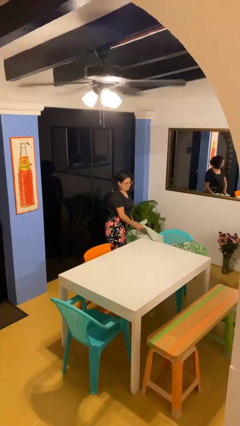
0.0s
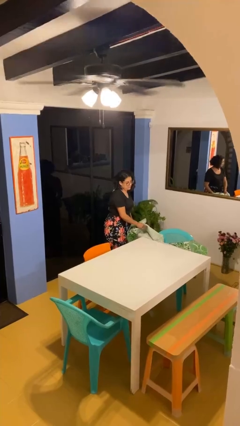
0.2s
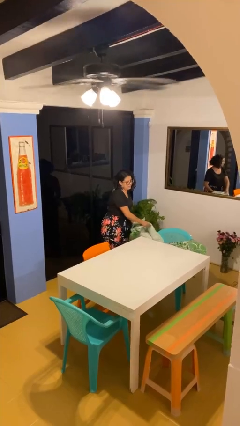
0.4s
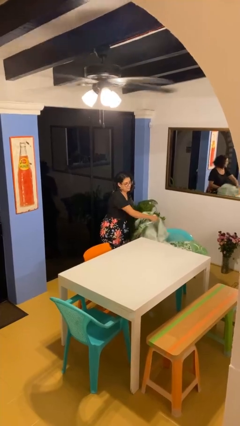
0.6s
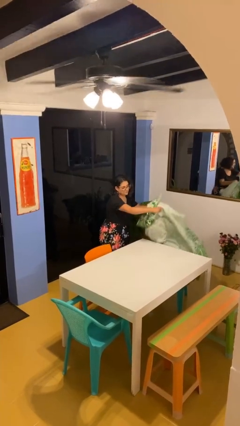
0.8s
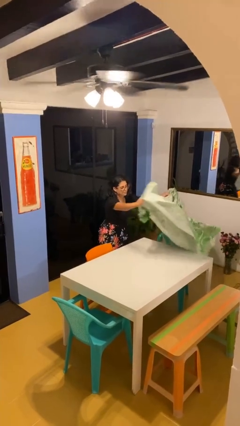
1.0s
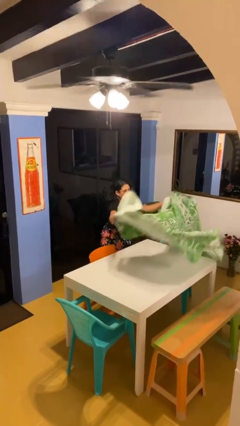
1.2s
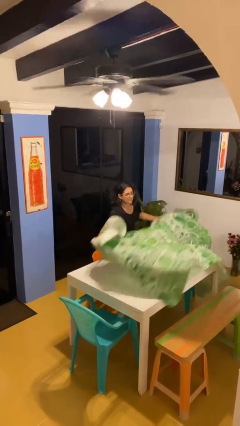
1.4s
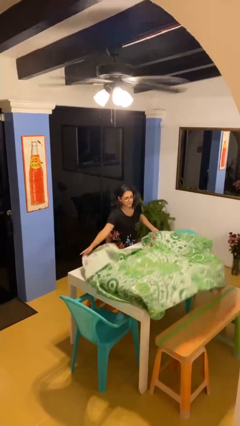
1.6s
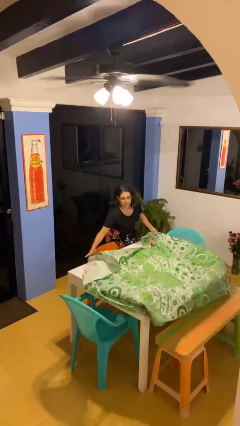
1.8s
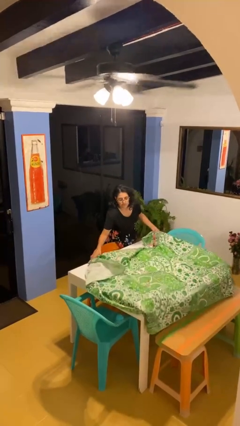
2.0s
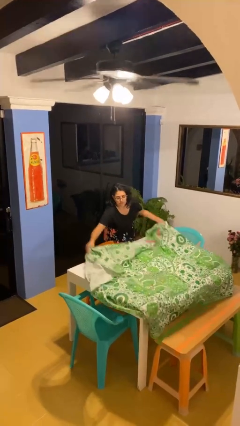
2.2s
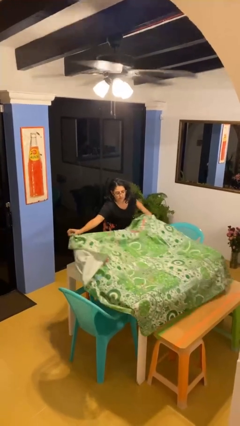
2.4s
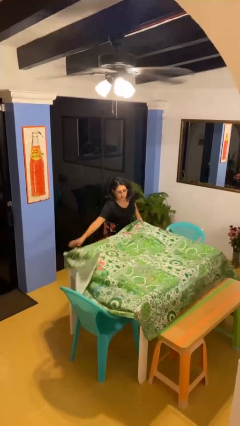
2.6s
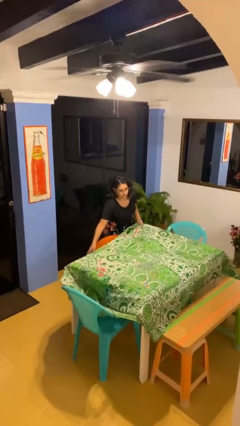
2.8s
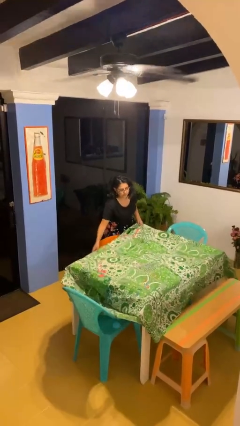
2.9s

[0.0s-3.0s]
person spreads tablecloth

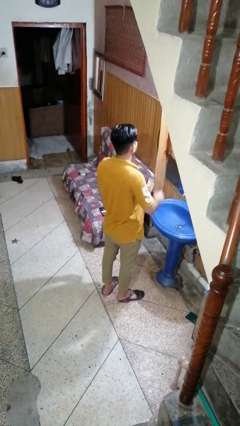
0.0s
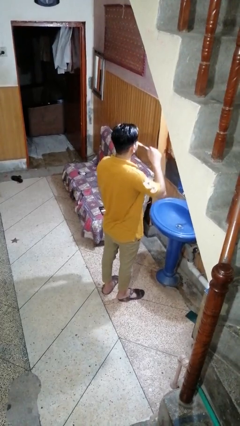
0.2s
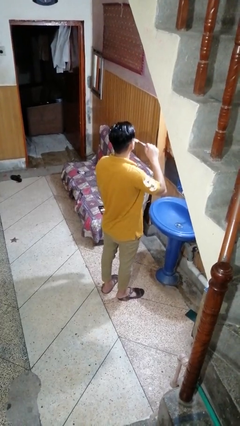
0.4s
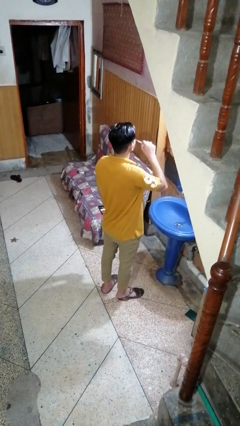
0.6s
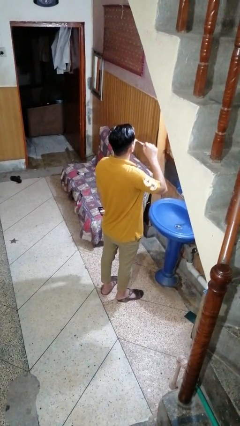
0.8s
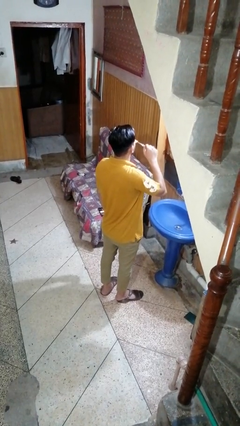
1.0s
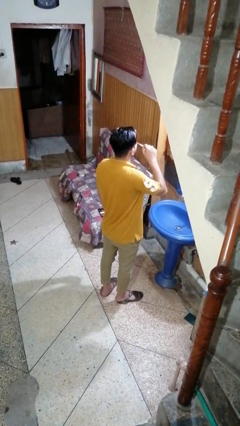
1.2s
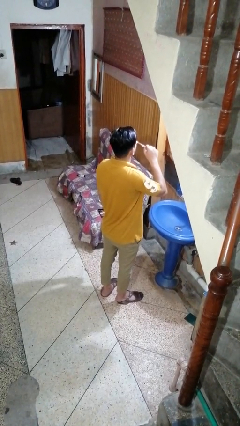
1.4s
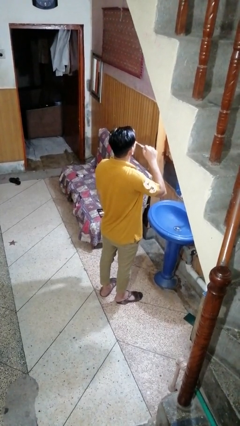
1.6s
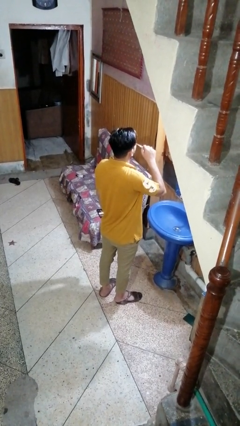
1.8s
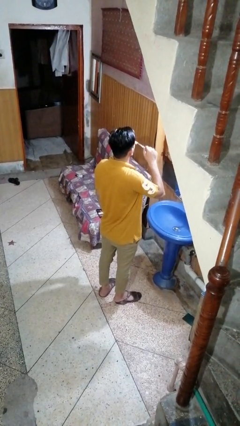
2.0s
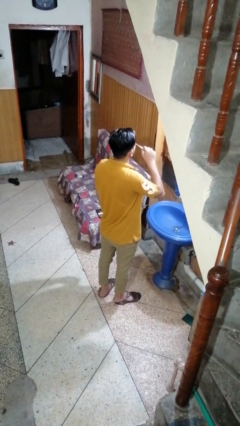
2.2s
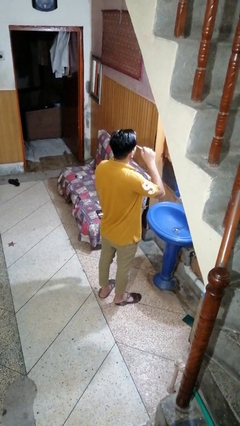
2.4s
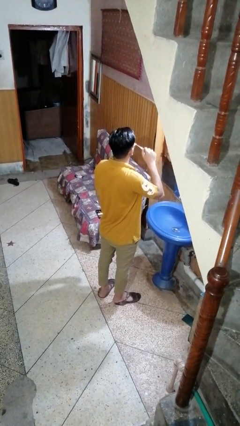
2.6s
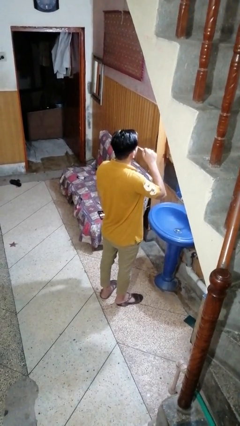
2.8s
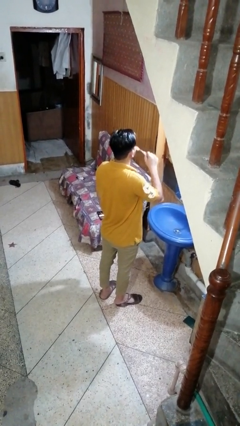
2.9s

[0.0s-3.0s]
person brushes teeth

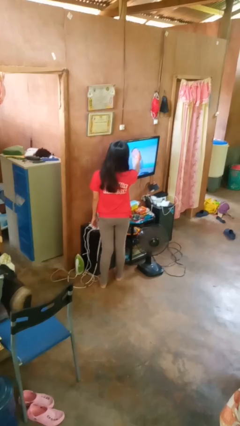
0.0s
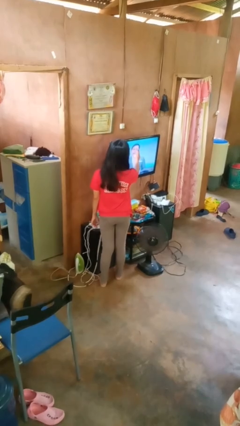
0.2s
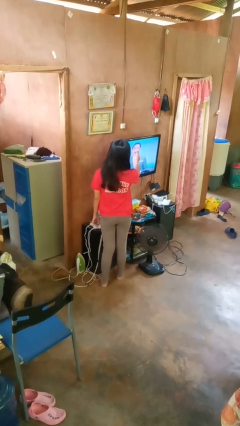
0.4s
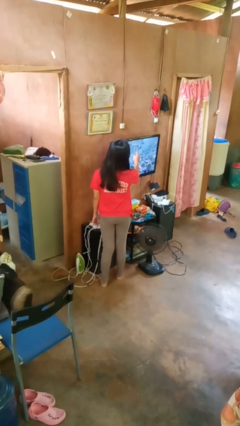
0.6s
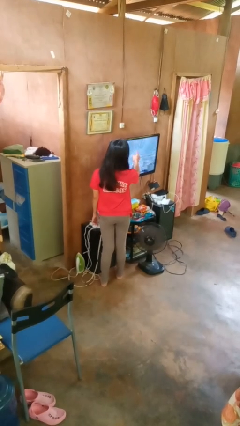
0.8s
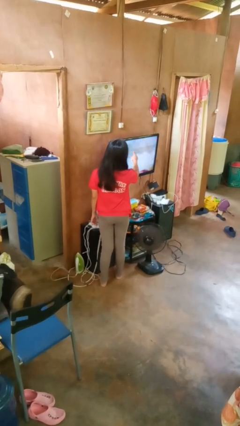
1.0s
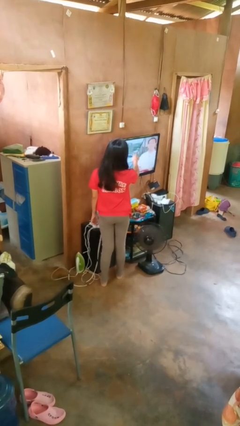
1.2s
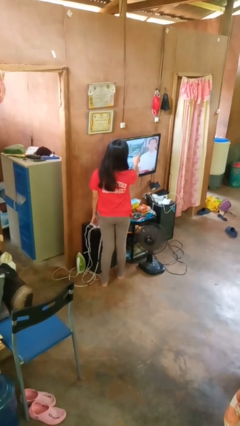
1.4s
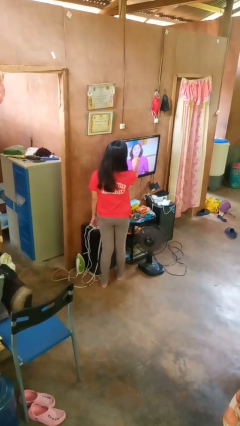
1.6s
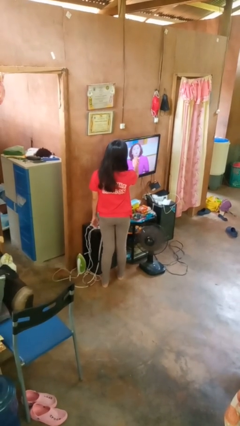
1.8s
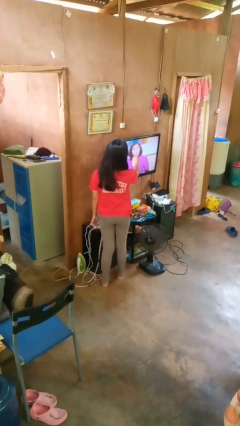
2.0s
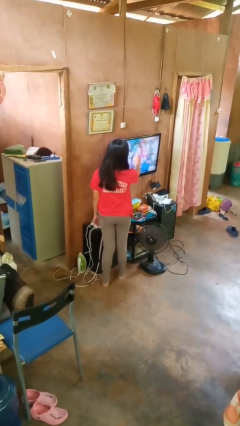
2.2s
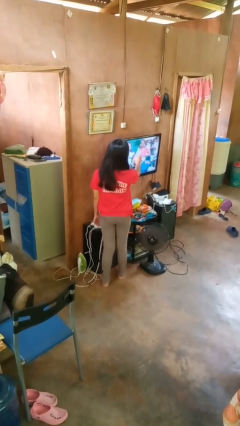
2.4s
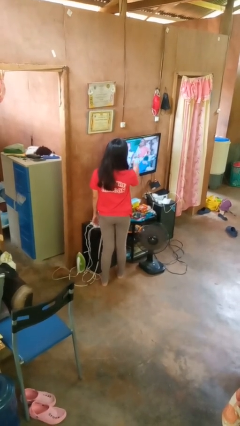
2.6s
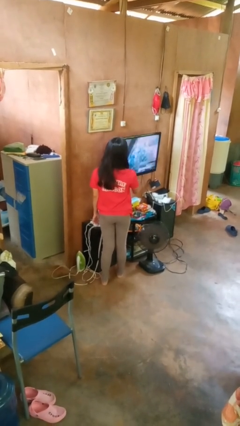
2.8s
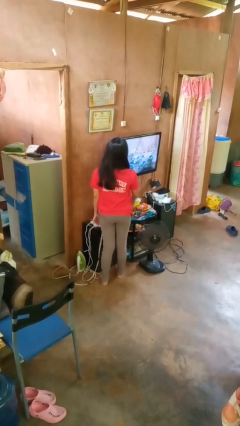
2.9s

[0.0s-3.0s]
person taps object with finger

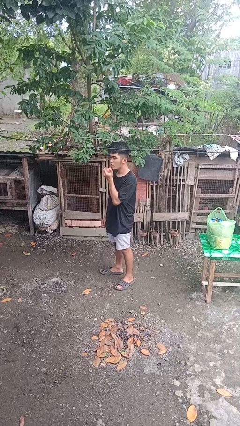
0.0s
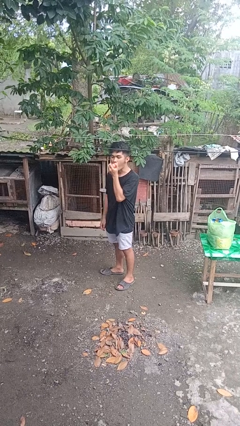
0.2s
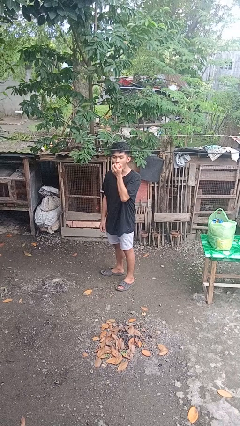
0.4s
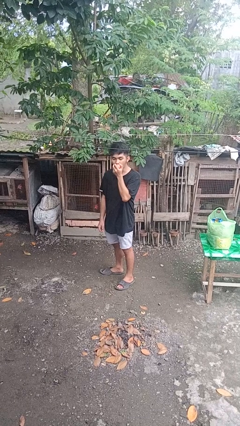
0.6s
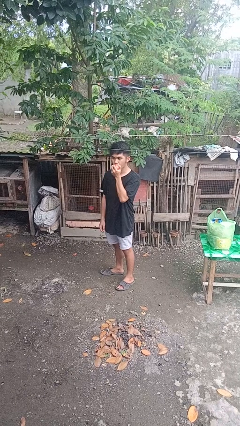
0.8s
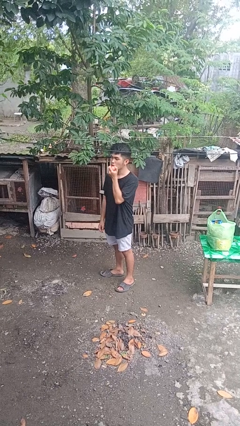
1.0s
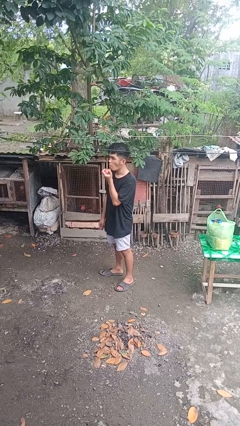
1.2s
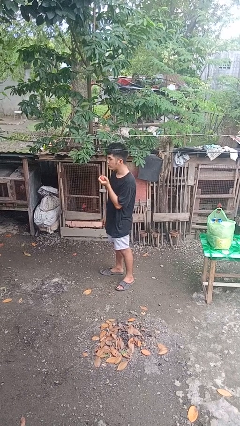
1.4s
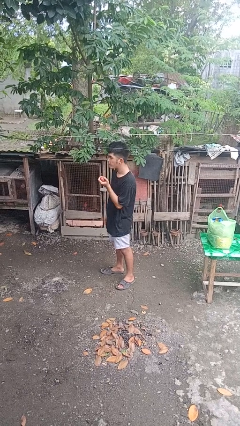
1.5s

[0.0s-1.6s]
person eats apple

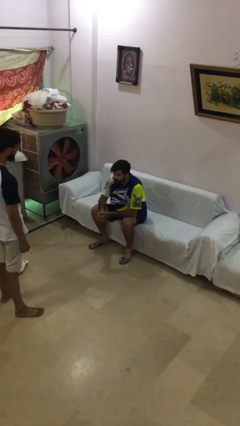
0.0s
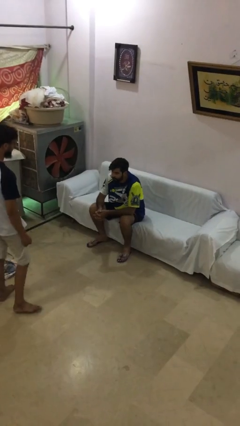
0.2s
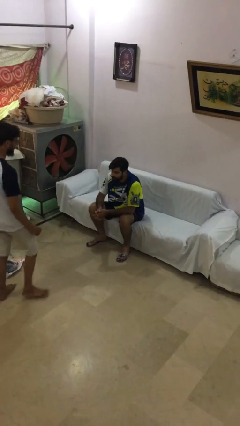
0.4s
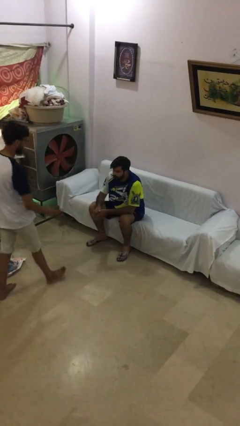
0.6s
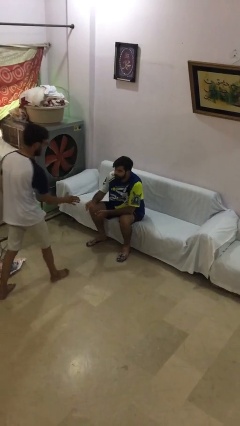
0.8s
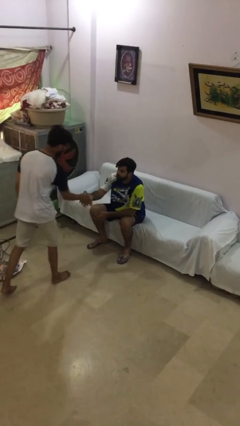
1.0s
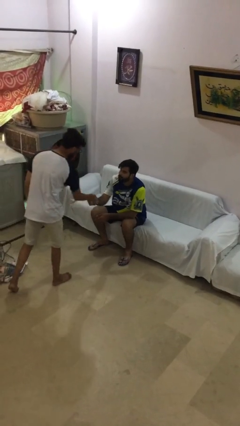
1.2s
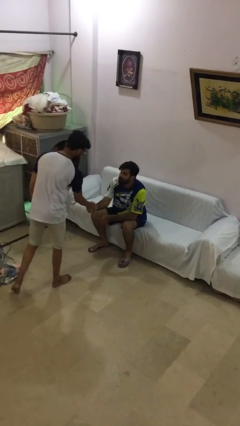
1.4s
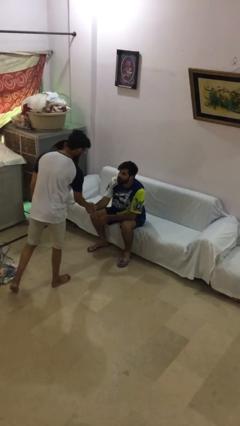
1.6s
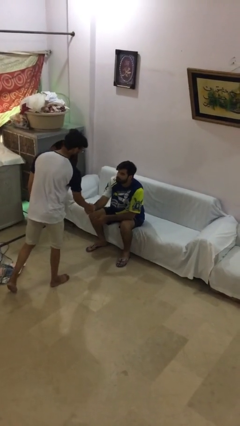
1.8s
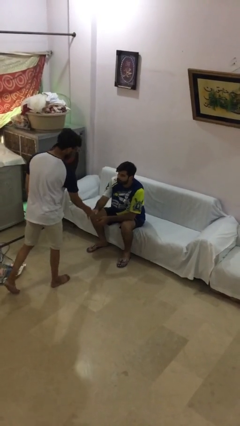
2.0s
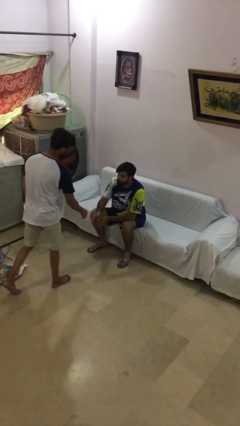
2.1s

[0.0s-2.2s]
person shakes hand

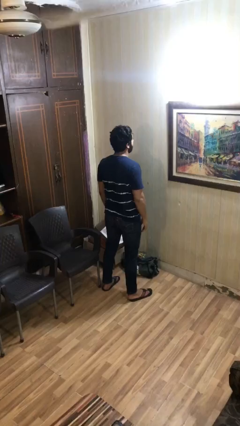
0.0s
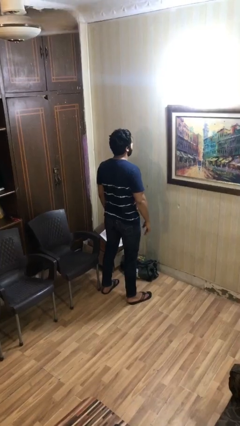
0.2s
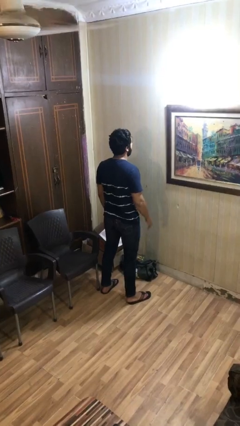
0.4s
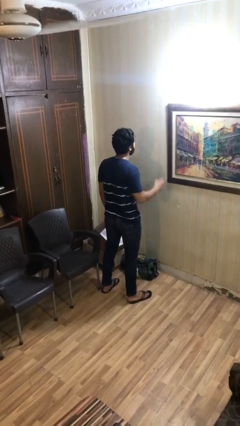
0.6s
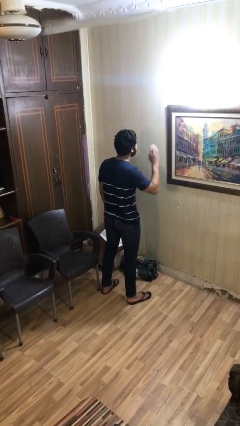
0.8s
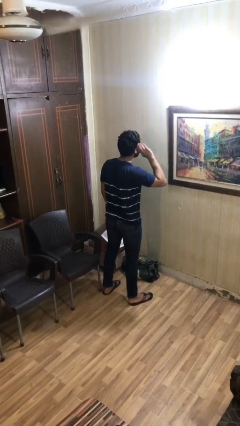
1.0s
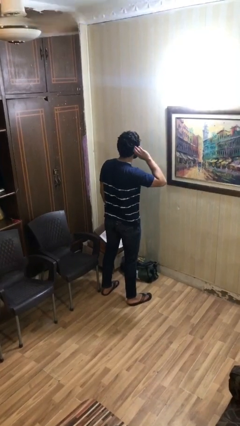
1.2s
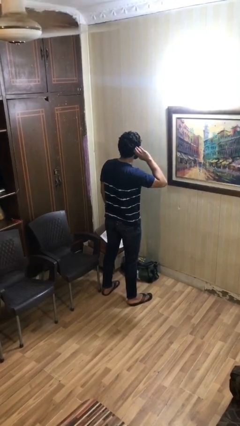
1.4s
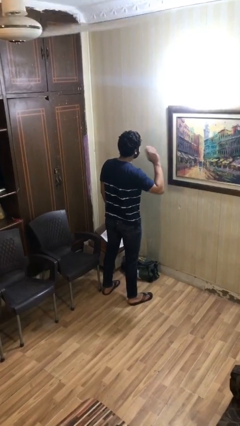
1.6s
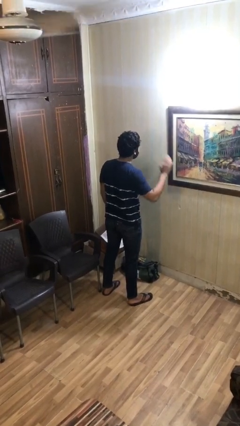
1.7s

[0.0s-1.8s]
person gestures listen closely

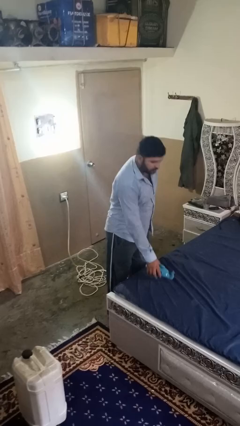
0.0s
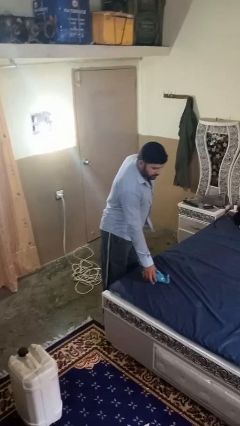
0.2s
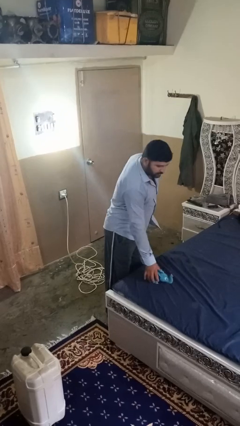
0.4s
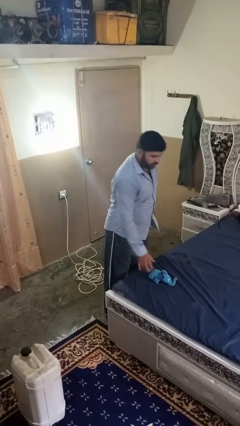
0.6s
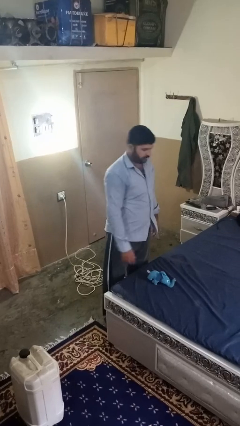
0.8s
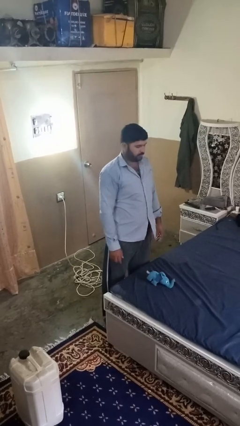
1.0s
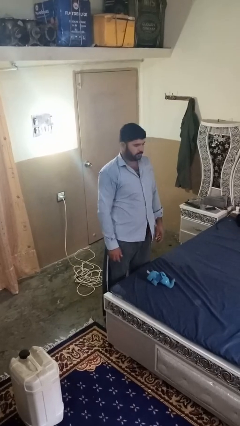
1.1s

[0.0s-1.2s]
person hugs stuffed animal

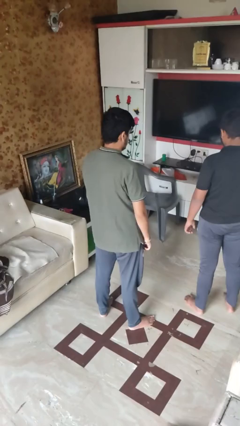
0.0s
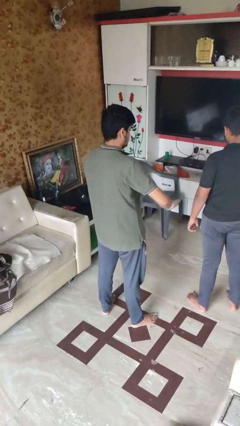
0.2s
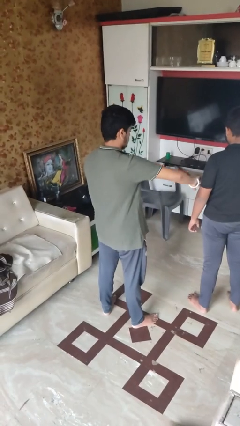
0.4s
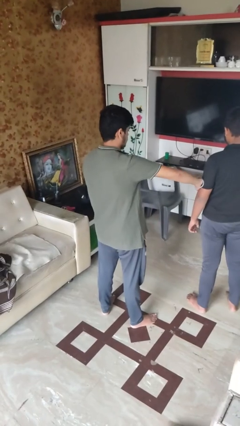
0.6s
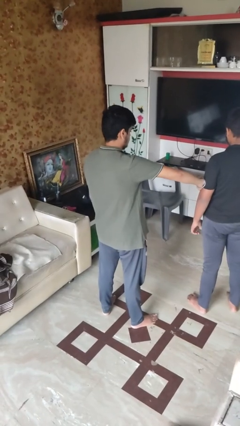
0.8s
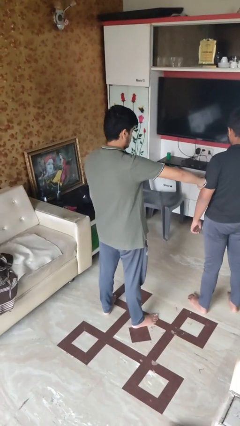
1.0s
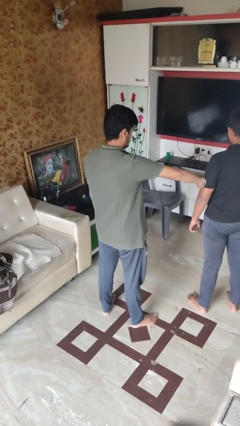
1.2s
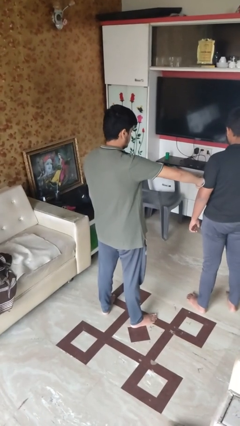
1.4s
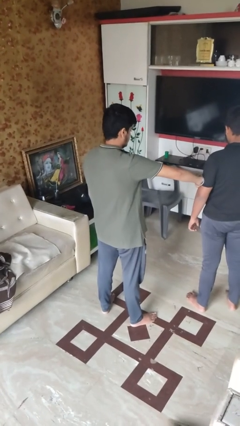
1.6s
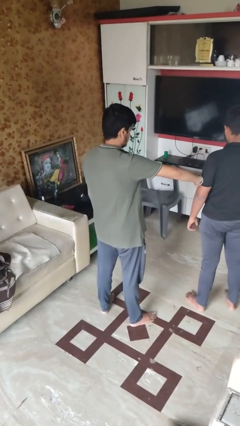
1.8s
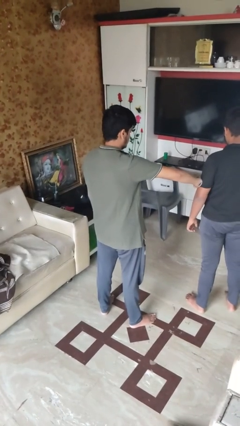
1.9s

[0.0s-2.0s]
person grabs person by bicep
